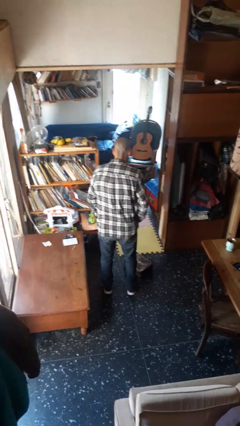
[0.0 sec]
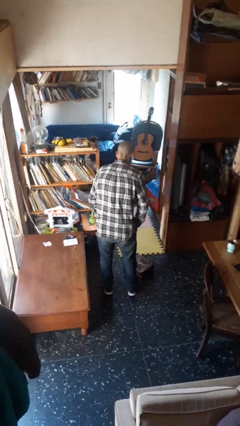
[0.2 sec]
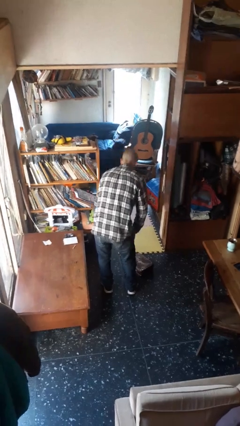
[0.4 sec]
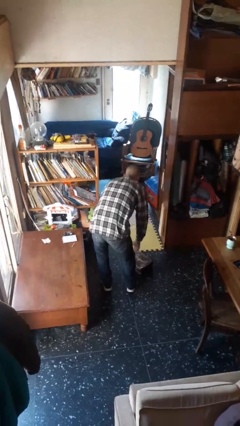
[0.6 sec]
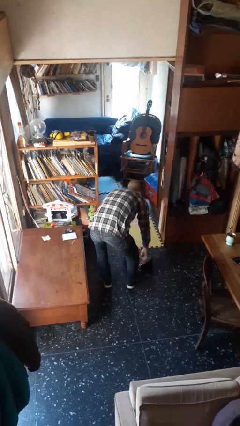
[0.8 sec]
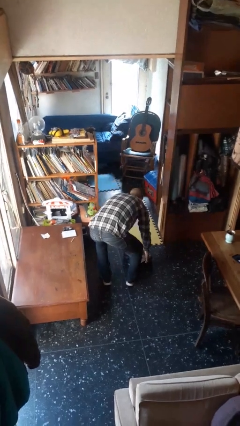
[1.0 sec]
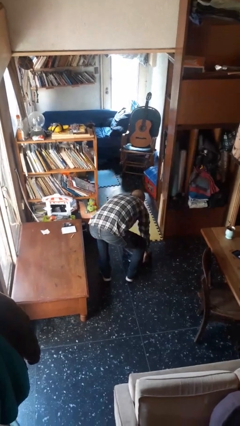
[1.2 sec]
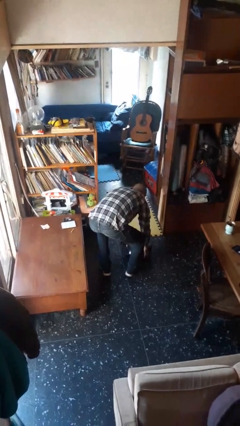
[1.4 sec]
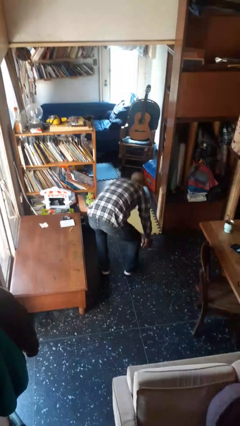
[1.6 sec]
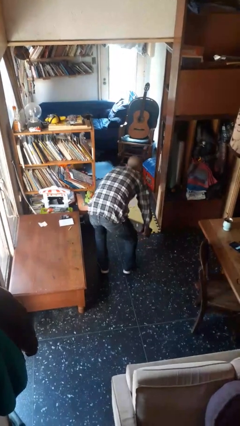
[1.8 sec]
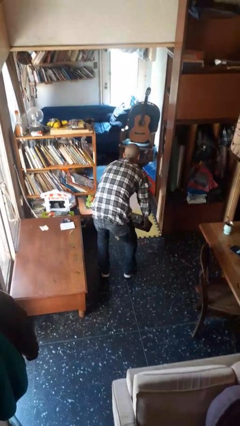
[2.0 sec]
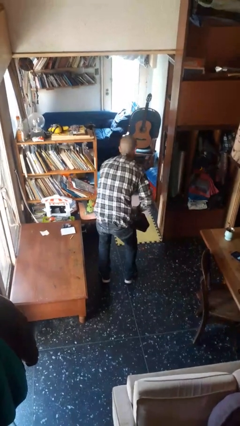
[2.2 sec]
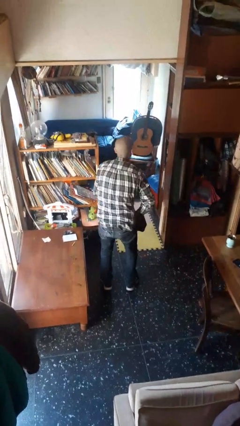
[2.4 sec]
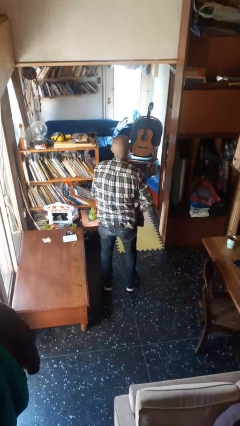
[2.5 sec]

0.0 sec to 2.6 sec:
person picks up object from floor

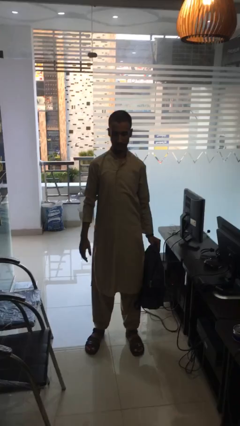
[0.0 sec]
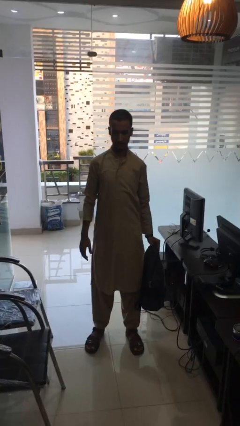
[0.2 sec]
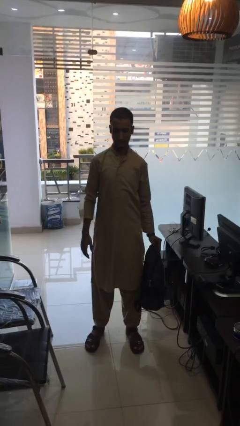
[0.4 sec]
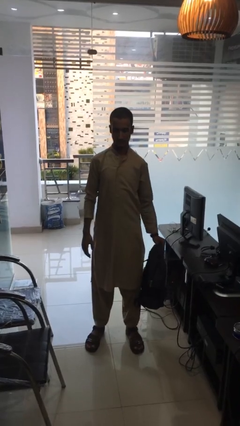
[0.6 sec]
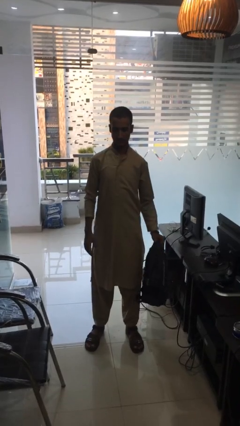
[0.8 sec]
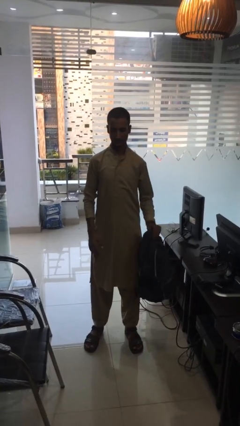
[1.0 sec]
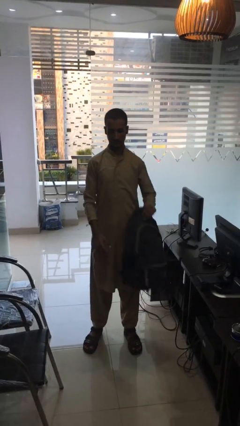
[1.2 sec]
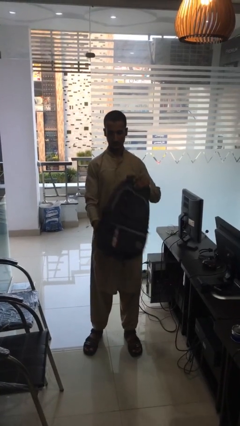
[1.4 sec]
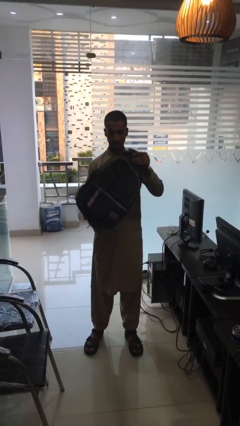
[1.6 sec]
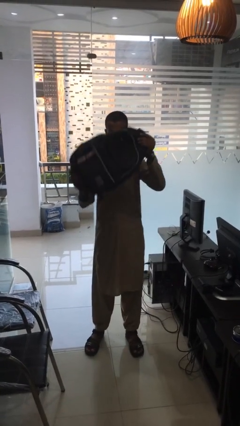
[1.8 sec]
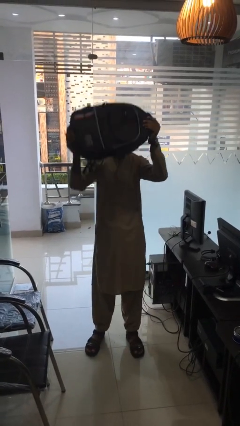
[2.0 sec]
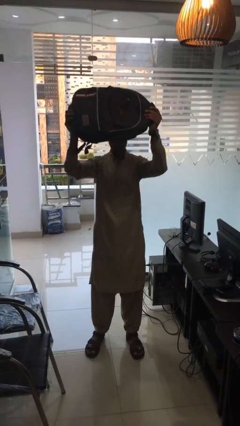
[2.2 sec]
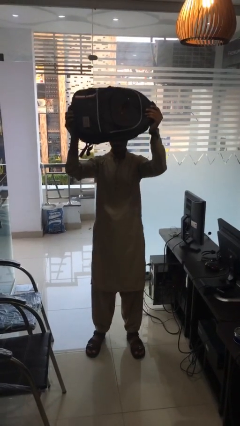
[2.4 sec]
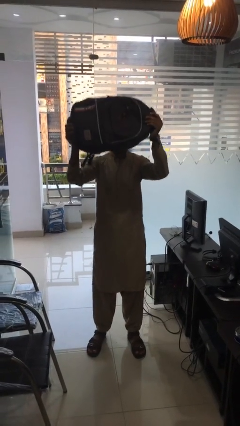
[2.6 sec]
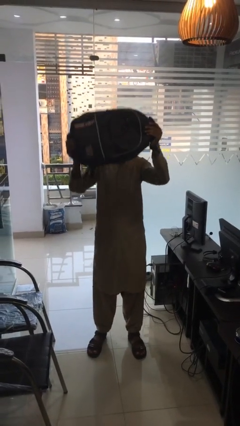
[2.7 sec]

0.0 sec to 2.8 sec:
person holds object above head

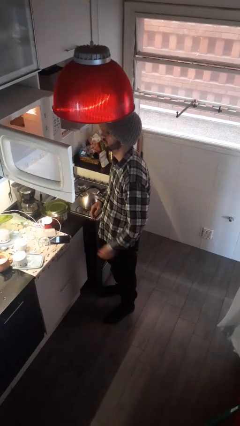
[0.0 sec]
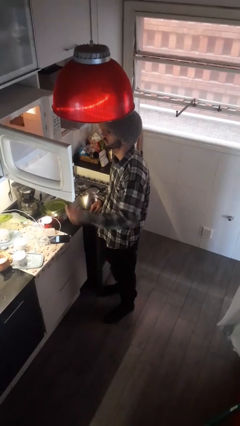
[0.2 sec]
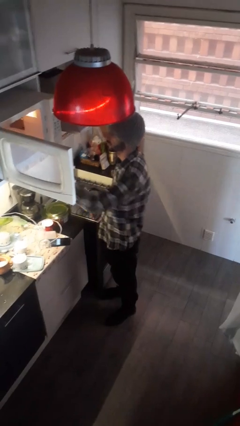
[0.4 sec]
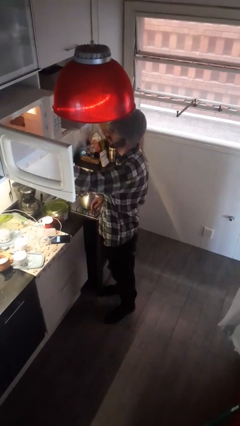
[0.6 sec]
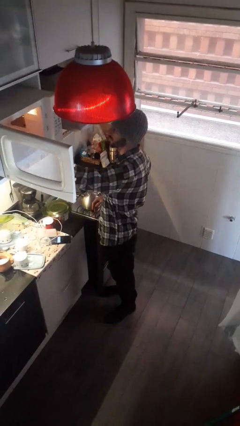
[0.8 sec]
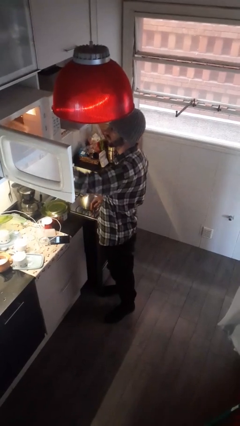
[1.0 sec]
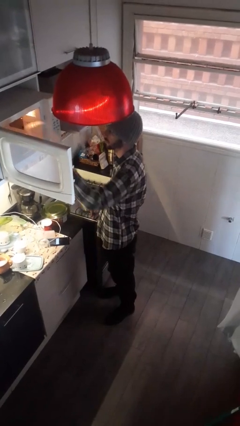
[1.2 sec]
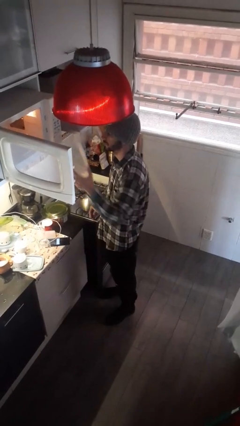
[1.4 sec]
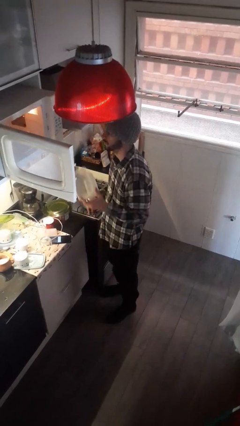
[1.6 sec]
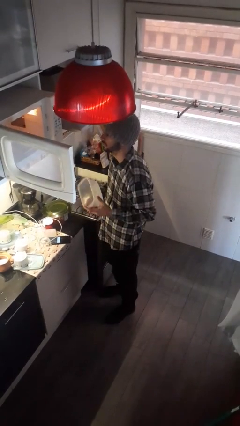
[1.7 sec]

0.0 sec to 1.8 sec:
person takes object from microwave

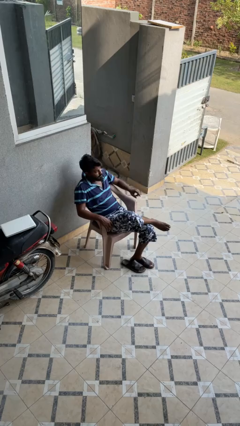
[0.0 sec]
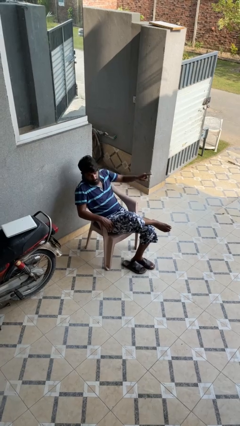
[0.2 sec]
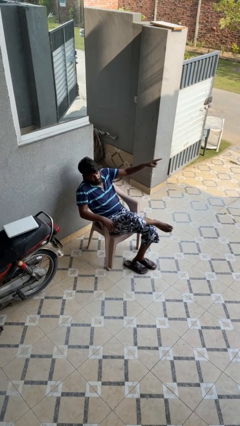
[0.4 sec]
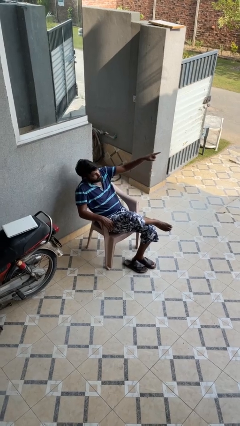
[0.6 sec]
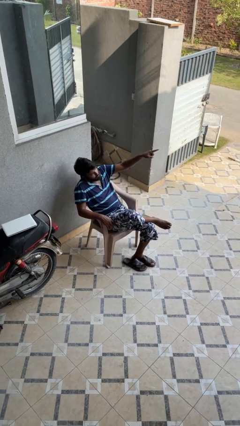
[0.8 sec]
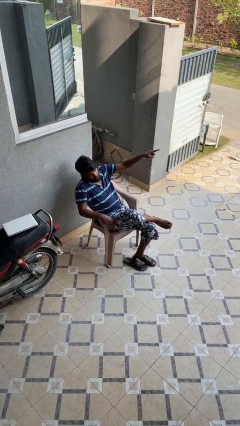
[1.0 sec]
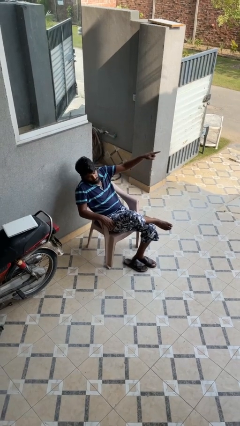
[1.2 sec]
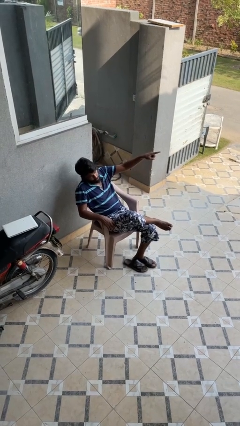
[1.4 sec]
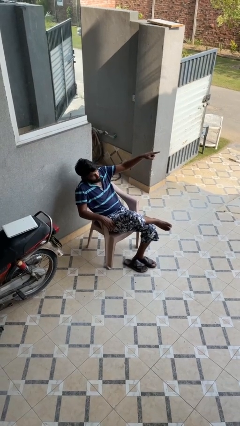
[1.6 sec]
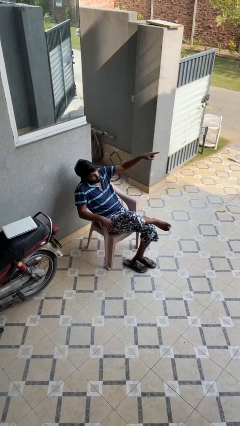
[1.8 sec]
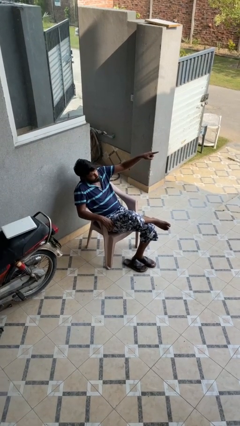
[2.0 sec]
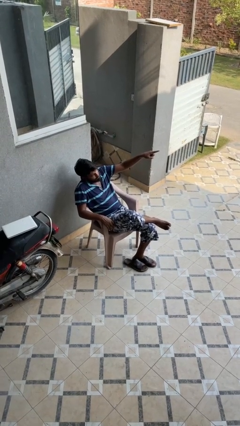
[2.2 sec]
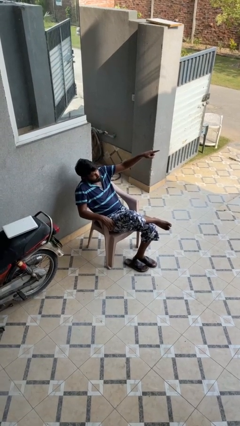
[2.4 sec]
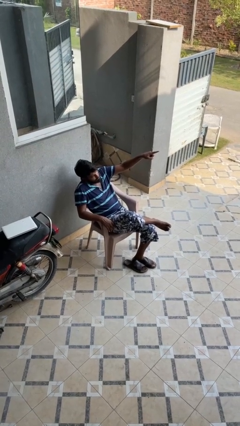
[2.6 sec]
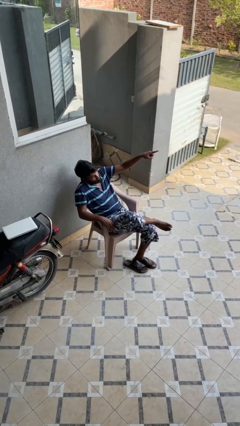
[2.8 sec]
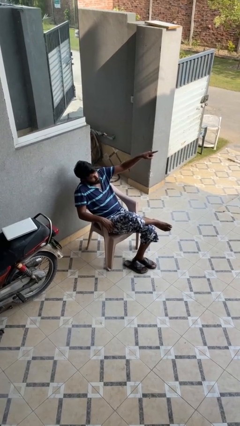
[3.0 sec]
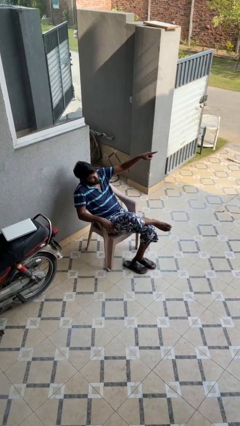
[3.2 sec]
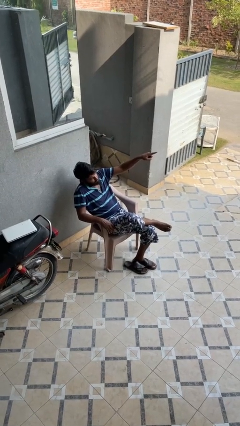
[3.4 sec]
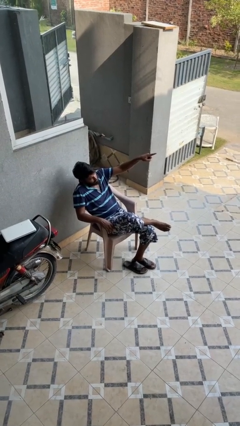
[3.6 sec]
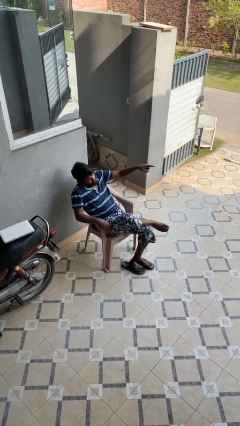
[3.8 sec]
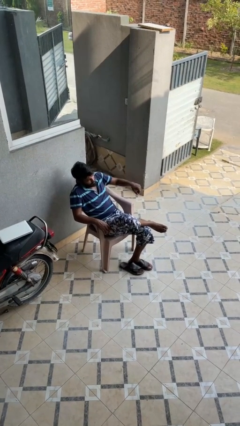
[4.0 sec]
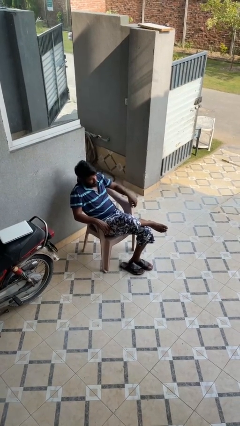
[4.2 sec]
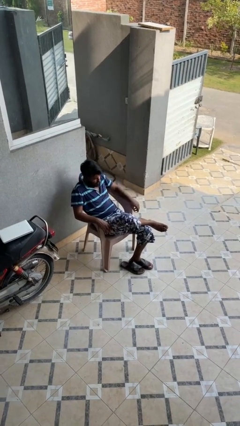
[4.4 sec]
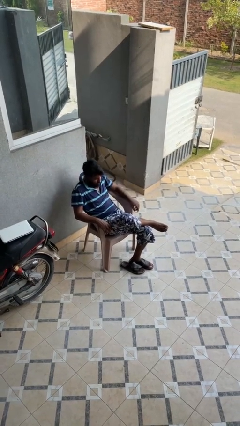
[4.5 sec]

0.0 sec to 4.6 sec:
person points at person

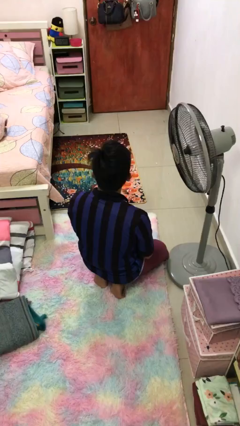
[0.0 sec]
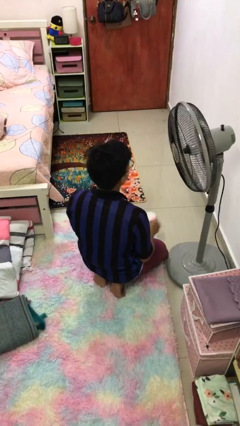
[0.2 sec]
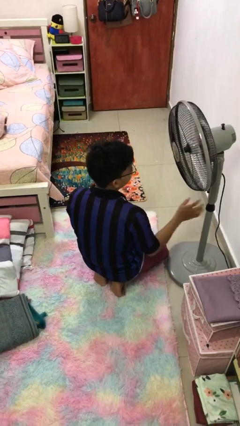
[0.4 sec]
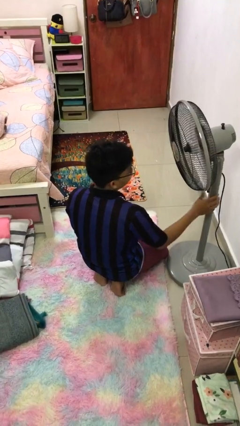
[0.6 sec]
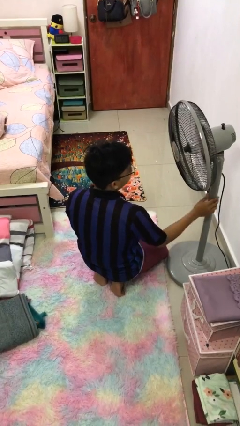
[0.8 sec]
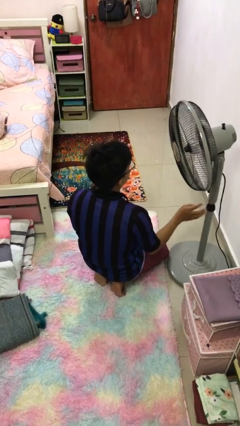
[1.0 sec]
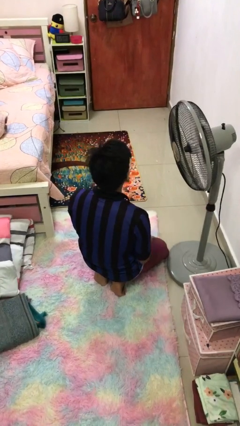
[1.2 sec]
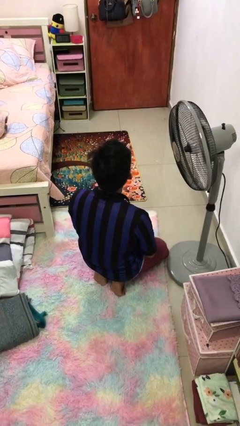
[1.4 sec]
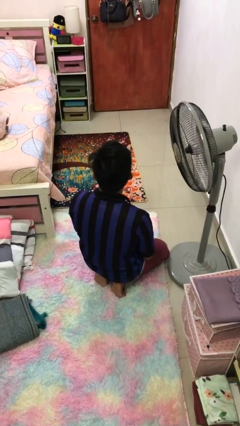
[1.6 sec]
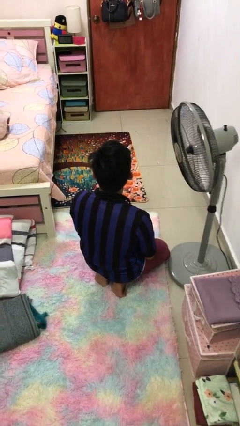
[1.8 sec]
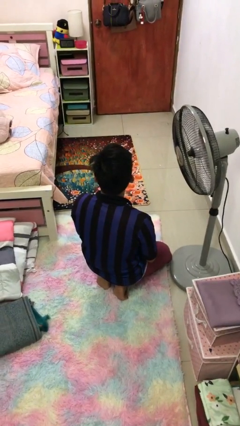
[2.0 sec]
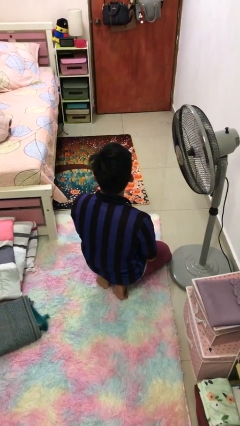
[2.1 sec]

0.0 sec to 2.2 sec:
person turns off fan

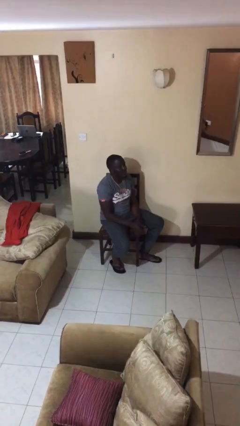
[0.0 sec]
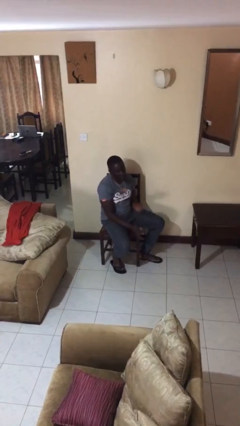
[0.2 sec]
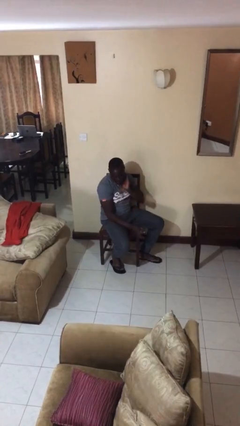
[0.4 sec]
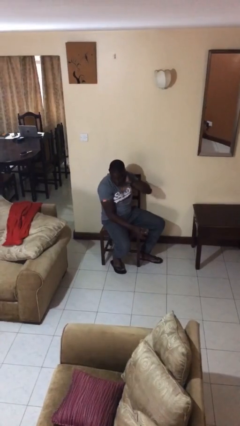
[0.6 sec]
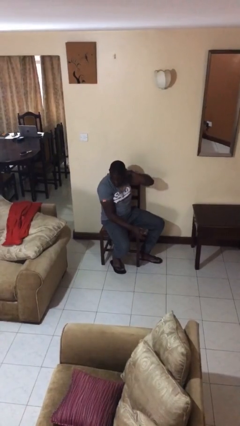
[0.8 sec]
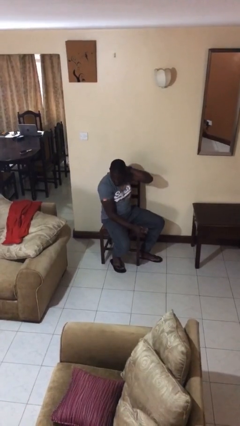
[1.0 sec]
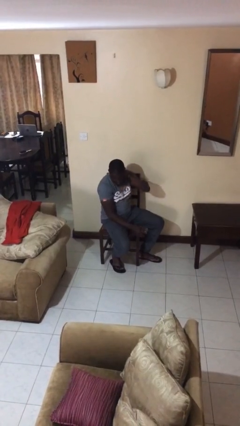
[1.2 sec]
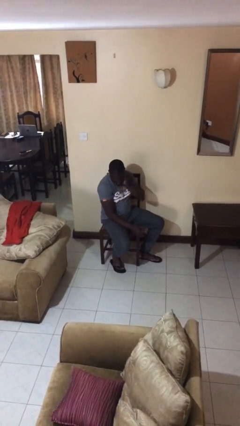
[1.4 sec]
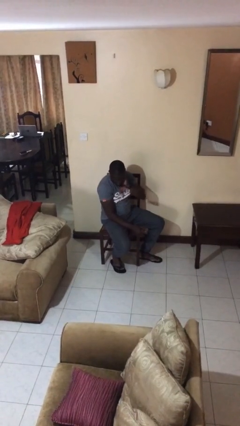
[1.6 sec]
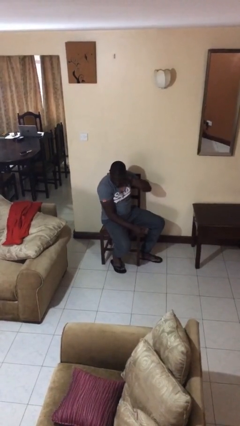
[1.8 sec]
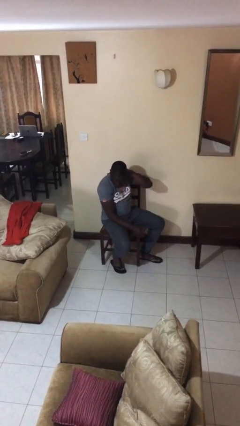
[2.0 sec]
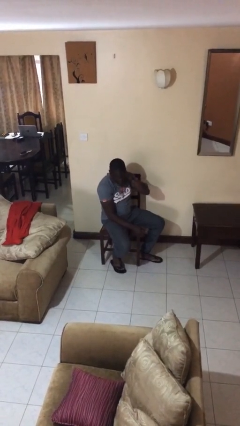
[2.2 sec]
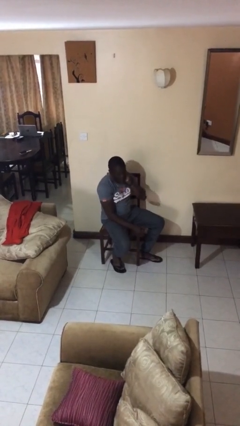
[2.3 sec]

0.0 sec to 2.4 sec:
person rubs neck

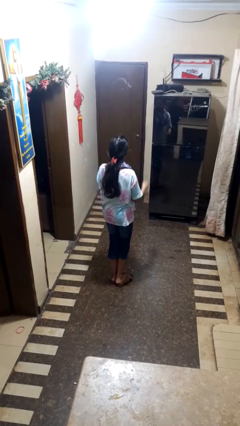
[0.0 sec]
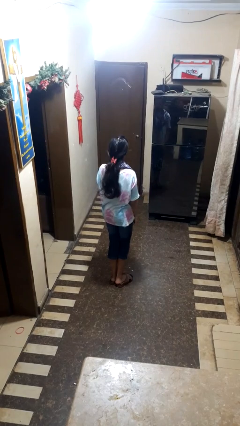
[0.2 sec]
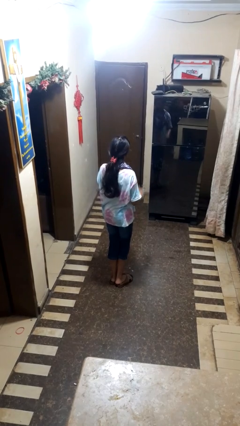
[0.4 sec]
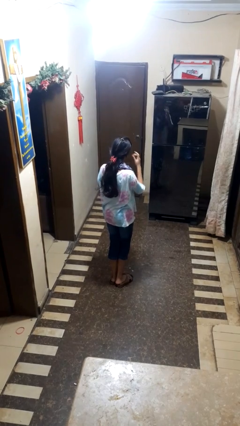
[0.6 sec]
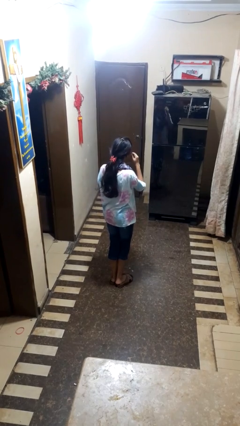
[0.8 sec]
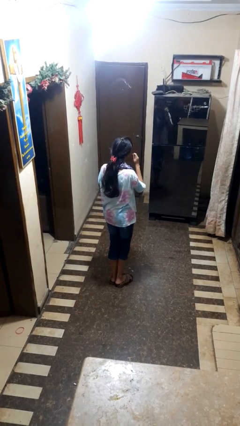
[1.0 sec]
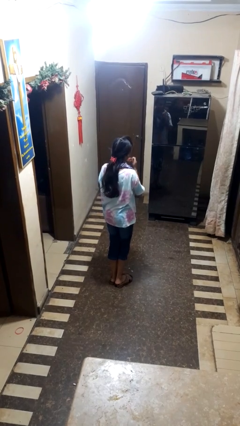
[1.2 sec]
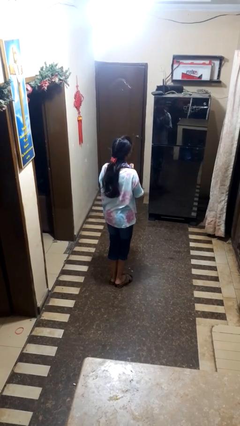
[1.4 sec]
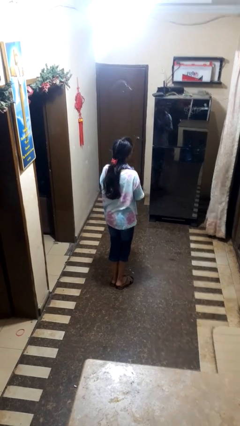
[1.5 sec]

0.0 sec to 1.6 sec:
person takes off sunglasses
